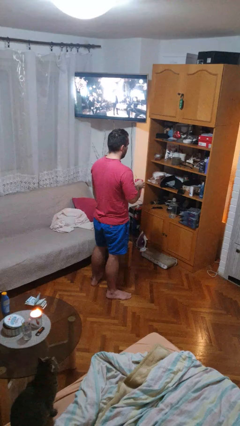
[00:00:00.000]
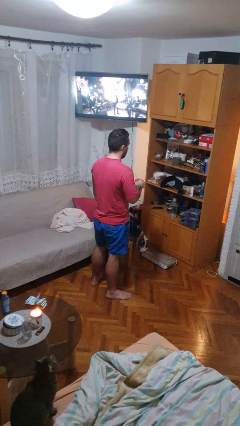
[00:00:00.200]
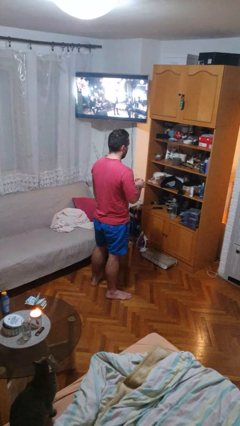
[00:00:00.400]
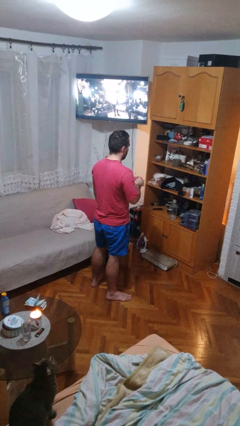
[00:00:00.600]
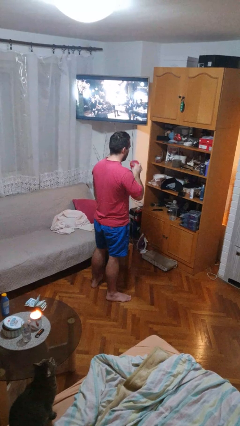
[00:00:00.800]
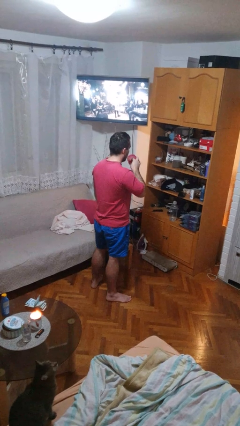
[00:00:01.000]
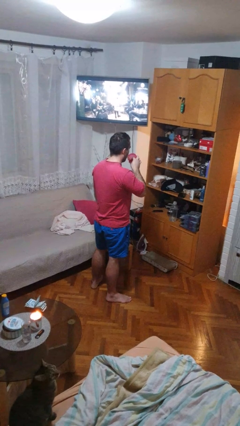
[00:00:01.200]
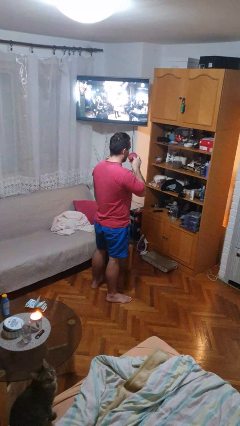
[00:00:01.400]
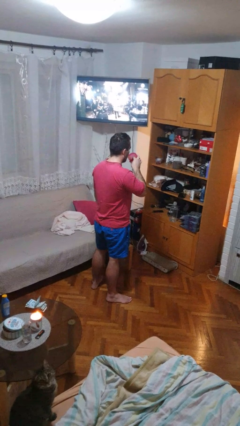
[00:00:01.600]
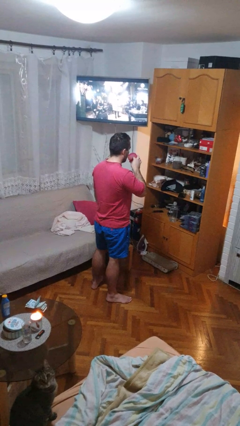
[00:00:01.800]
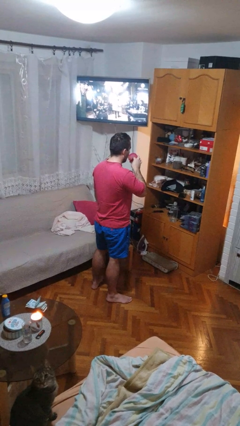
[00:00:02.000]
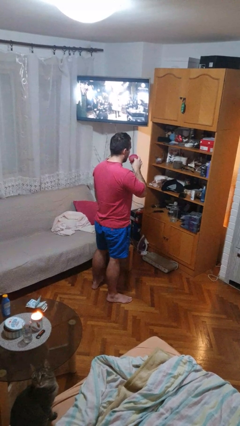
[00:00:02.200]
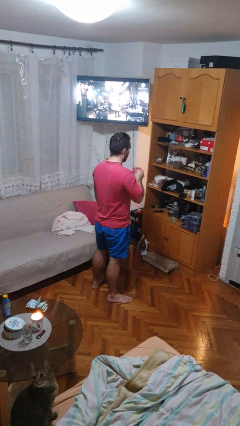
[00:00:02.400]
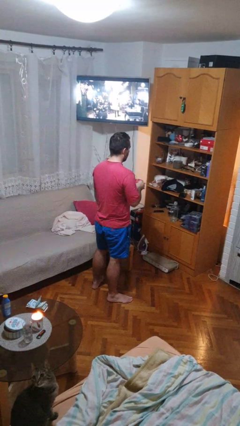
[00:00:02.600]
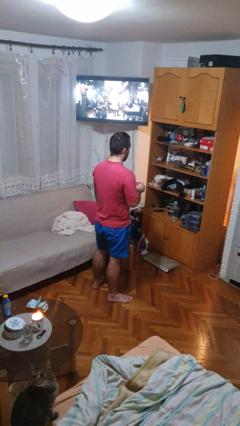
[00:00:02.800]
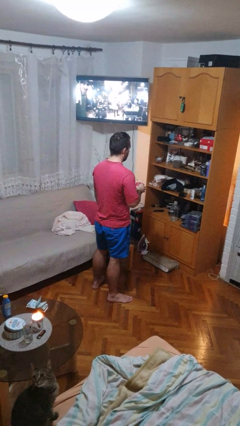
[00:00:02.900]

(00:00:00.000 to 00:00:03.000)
person drinks from straw

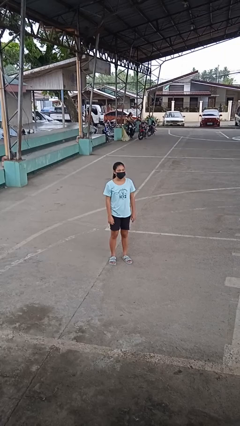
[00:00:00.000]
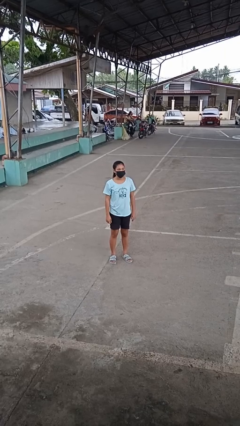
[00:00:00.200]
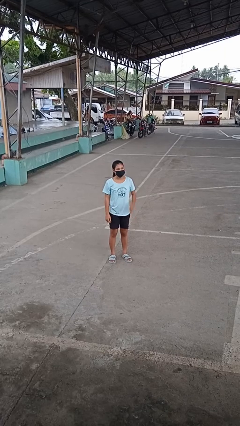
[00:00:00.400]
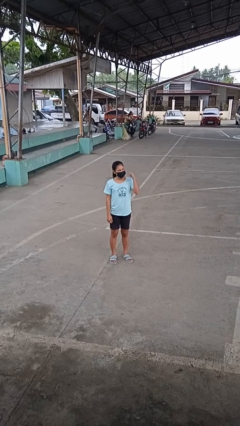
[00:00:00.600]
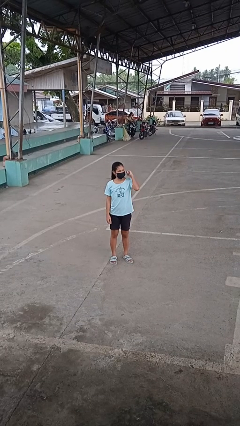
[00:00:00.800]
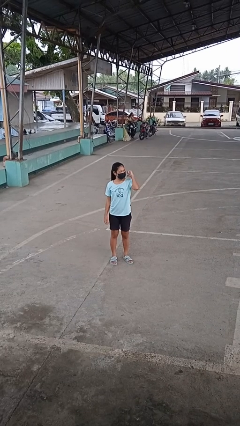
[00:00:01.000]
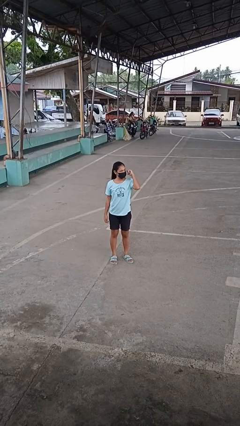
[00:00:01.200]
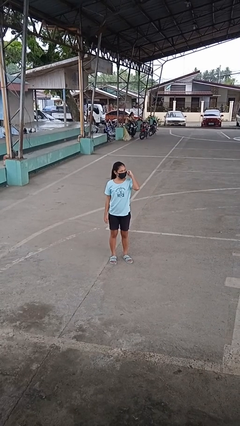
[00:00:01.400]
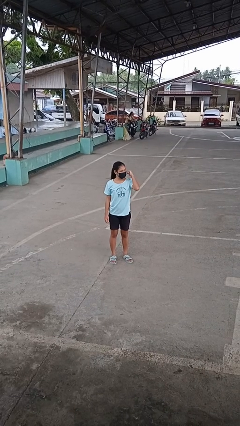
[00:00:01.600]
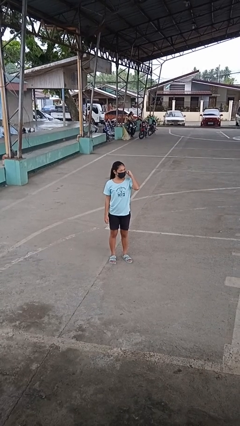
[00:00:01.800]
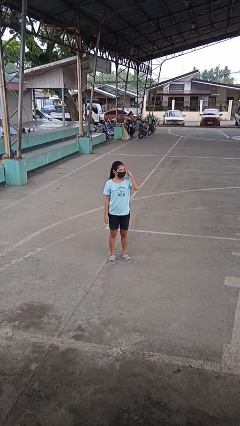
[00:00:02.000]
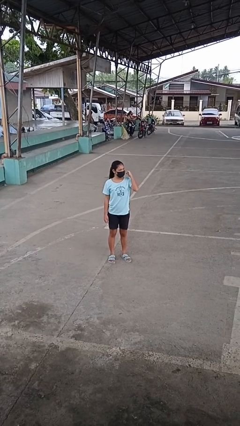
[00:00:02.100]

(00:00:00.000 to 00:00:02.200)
person gestures behind me

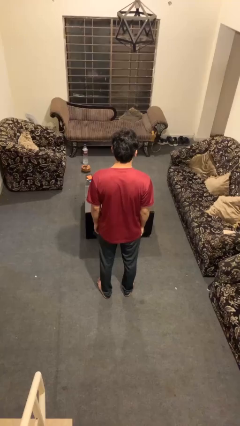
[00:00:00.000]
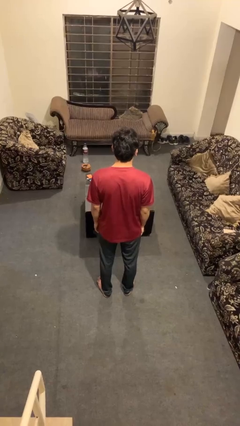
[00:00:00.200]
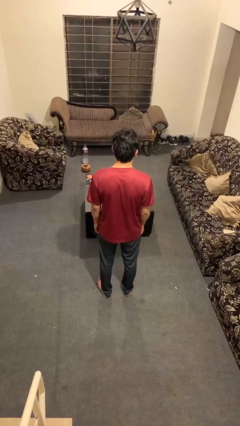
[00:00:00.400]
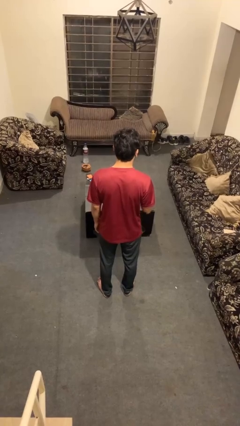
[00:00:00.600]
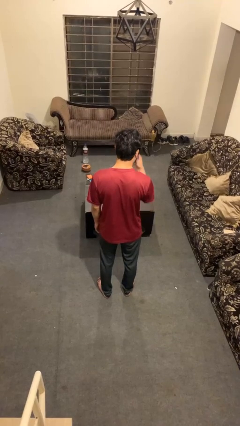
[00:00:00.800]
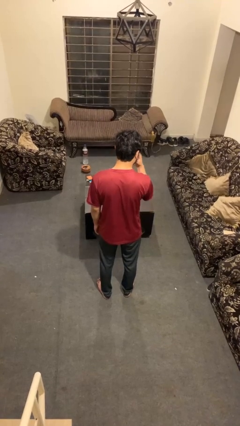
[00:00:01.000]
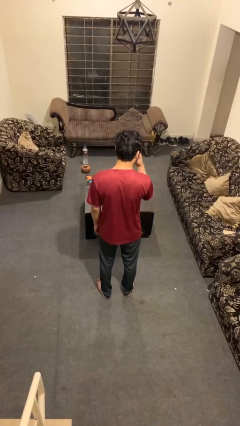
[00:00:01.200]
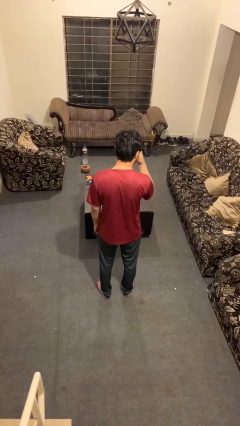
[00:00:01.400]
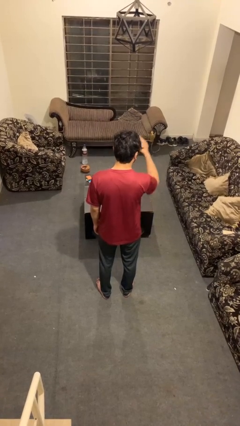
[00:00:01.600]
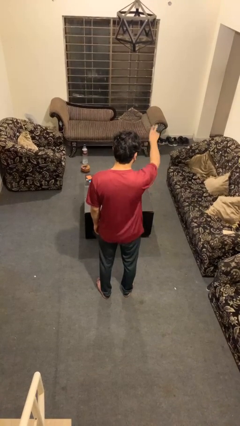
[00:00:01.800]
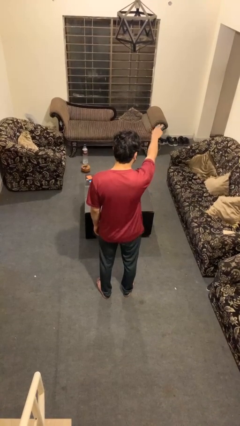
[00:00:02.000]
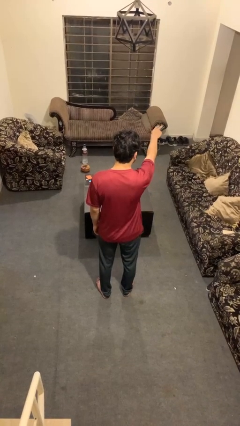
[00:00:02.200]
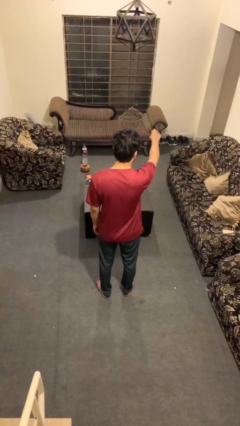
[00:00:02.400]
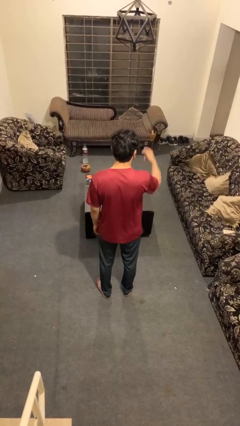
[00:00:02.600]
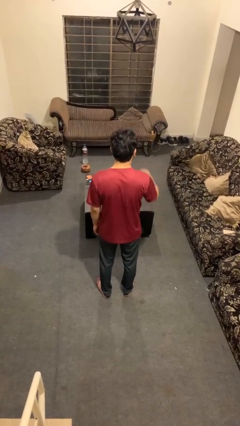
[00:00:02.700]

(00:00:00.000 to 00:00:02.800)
person gestures watch closely

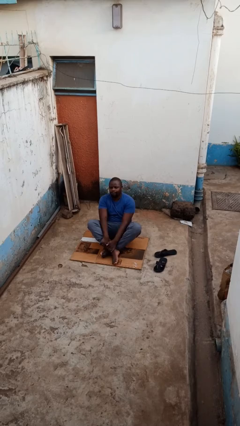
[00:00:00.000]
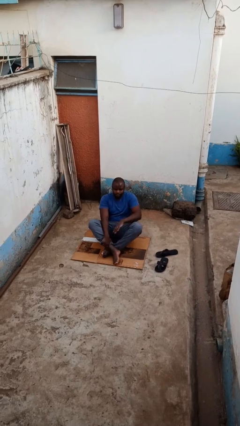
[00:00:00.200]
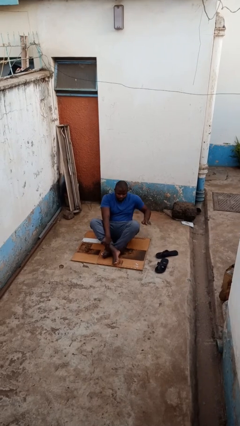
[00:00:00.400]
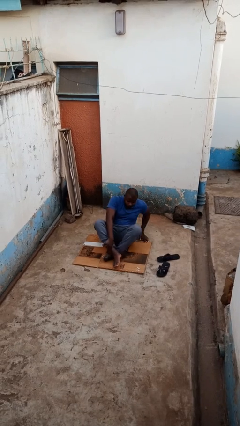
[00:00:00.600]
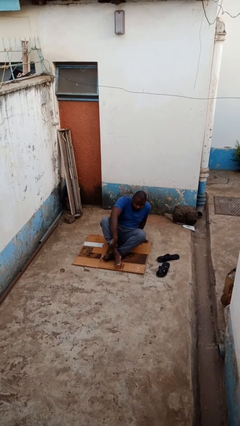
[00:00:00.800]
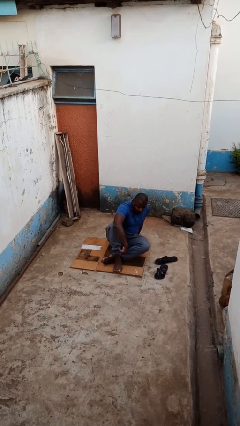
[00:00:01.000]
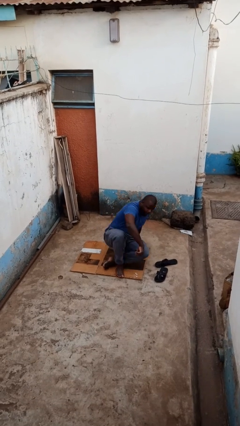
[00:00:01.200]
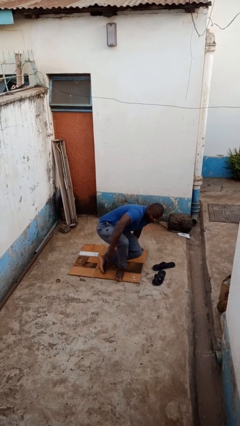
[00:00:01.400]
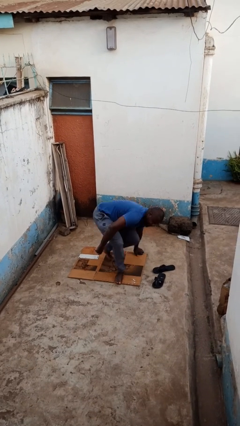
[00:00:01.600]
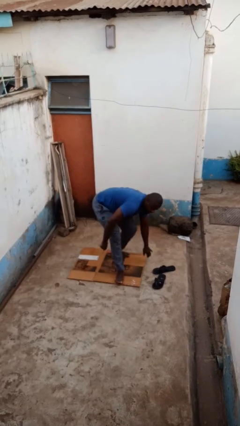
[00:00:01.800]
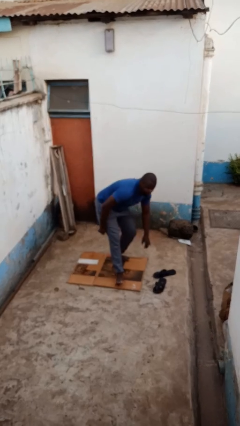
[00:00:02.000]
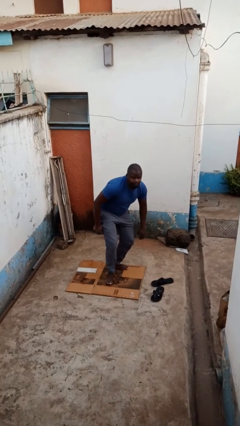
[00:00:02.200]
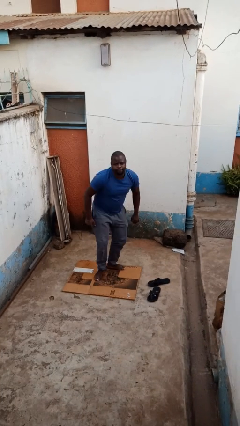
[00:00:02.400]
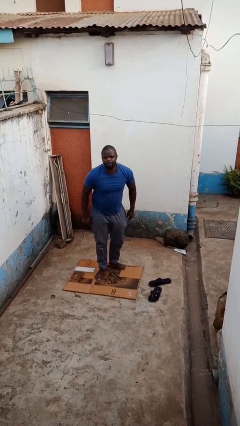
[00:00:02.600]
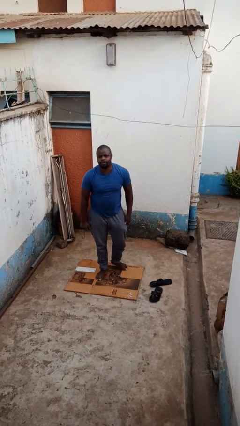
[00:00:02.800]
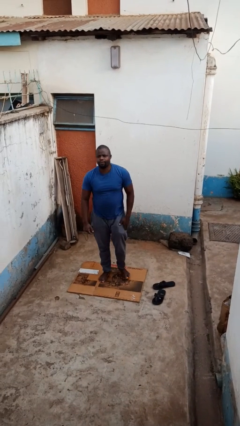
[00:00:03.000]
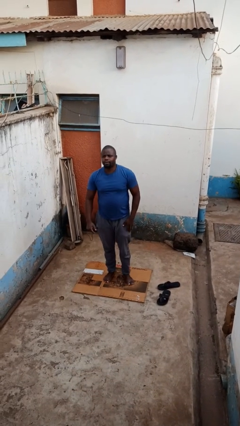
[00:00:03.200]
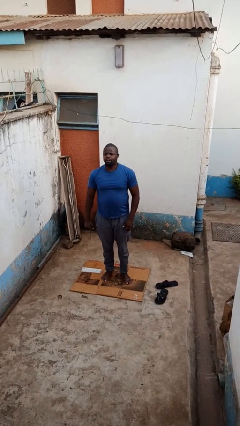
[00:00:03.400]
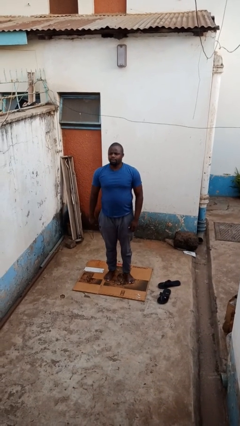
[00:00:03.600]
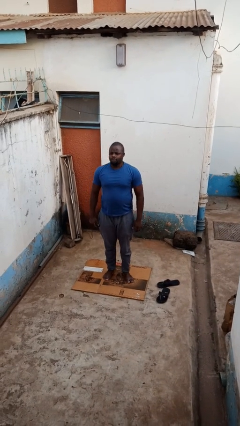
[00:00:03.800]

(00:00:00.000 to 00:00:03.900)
person stands up from floor

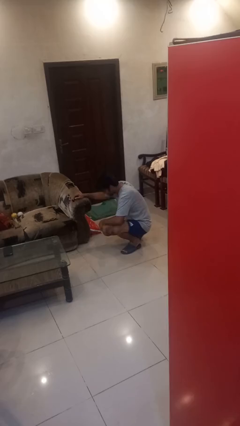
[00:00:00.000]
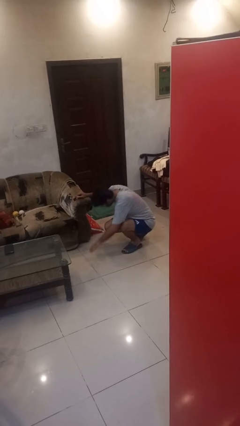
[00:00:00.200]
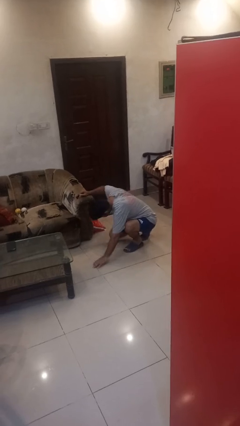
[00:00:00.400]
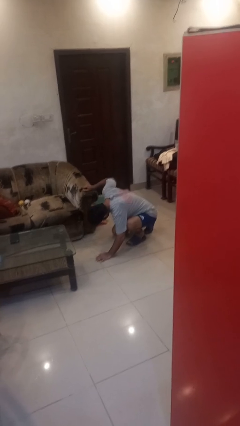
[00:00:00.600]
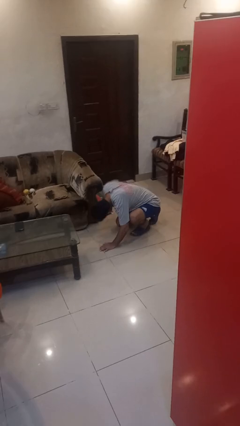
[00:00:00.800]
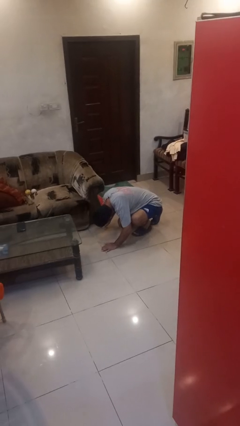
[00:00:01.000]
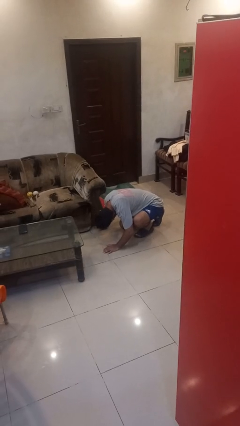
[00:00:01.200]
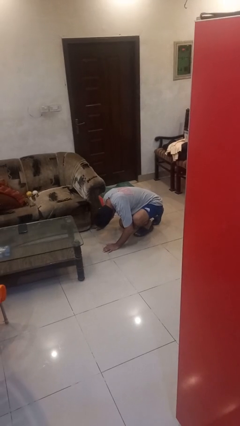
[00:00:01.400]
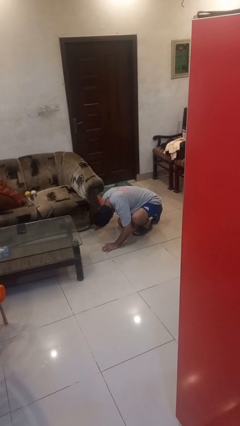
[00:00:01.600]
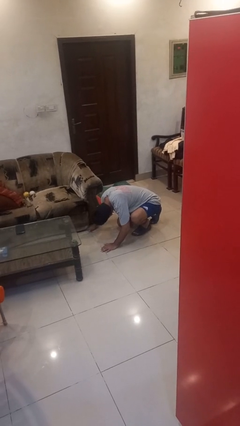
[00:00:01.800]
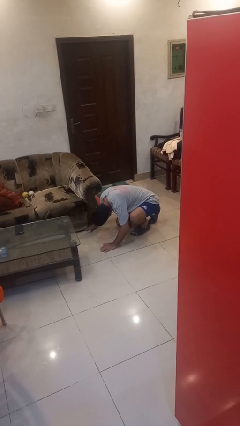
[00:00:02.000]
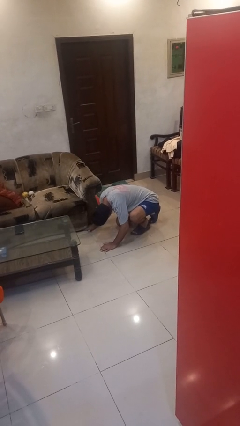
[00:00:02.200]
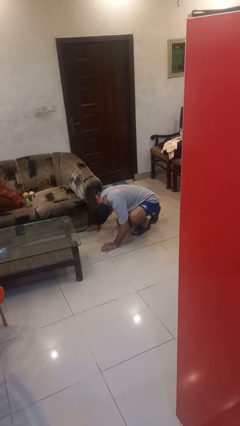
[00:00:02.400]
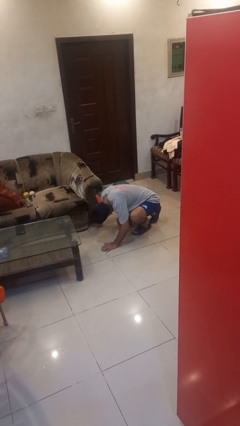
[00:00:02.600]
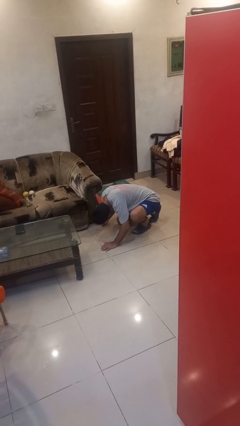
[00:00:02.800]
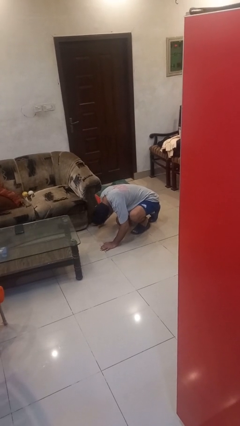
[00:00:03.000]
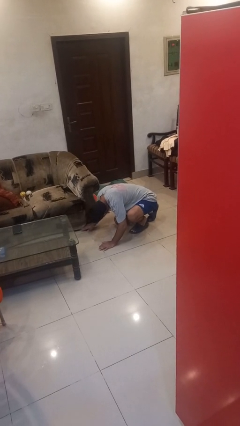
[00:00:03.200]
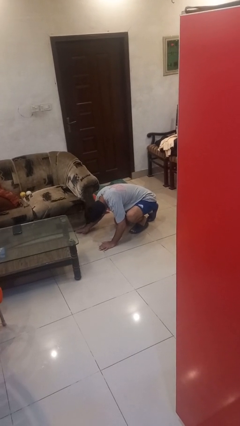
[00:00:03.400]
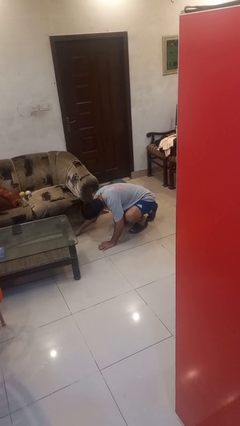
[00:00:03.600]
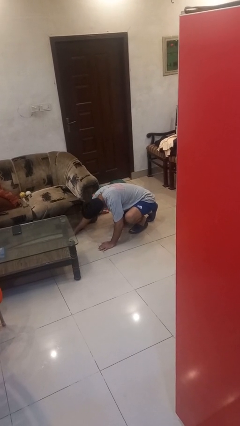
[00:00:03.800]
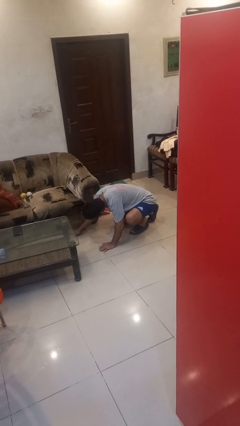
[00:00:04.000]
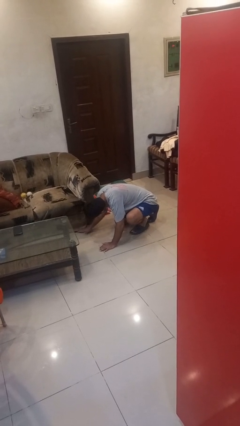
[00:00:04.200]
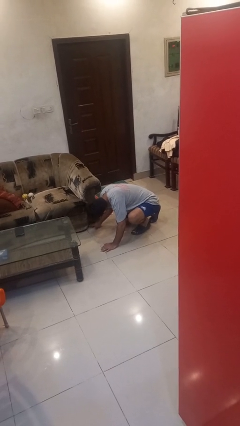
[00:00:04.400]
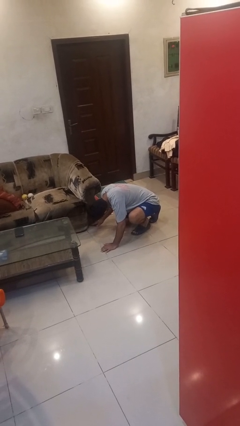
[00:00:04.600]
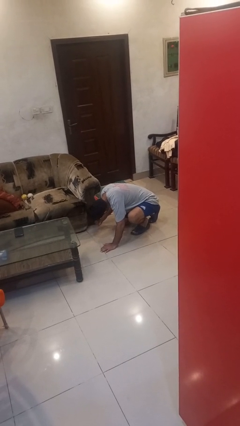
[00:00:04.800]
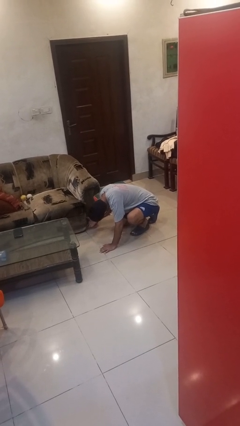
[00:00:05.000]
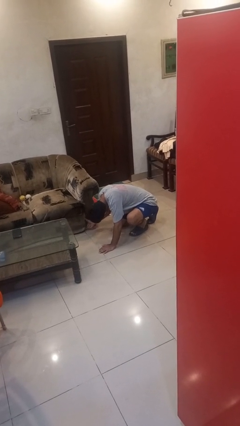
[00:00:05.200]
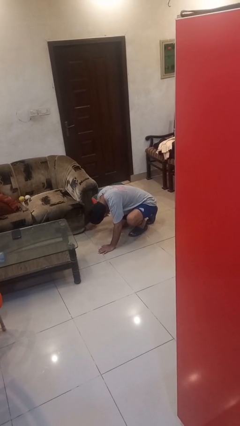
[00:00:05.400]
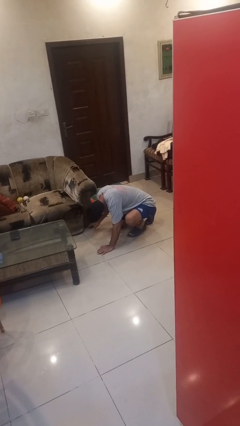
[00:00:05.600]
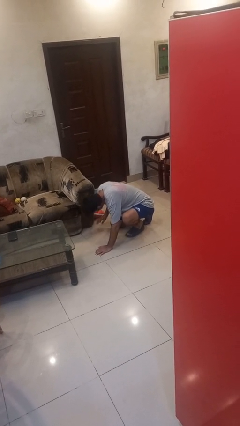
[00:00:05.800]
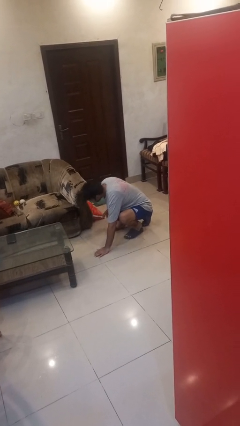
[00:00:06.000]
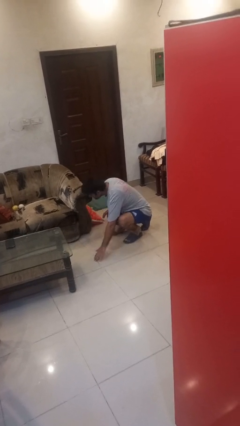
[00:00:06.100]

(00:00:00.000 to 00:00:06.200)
person searches under couch
